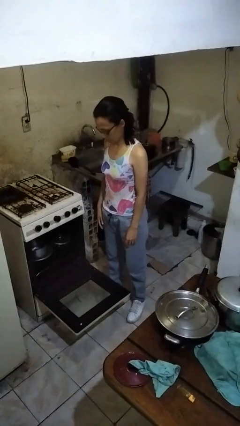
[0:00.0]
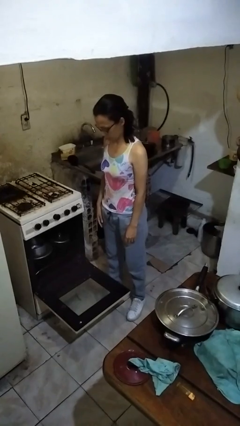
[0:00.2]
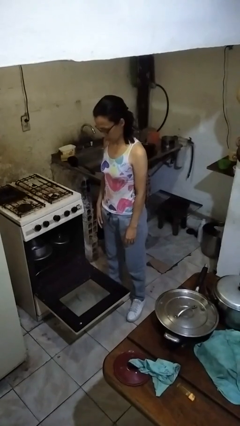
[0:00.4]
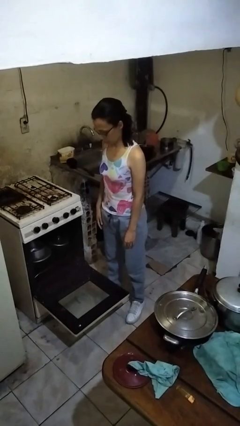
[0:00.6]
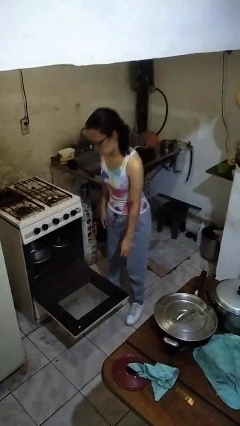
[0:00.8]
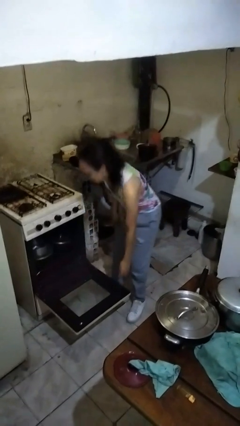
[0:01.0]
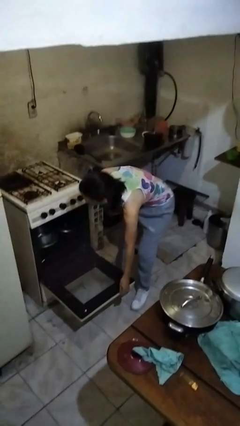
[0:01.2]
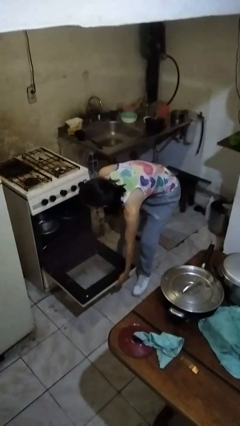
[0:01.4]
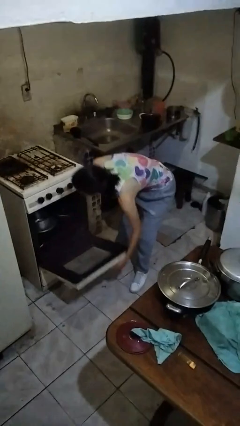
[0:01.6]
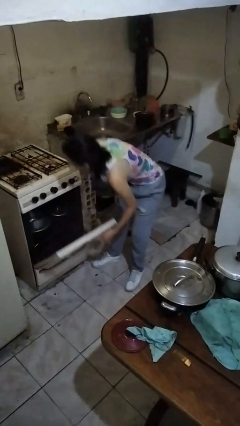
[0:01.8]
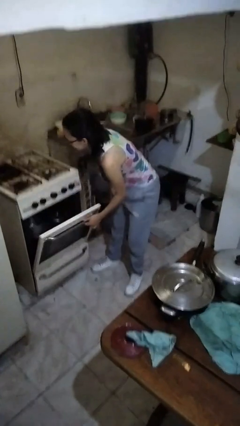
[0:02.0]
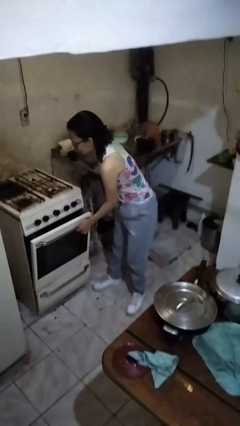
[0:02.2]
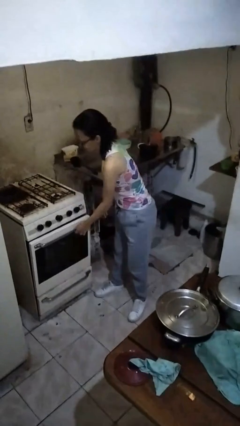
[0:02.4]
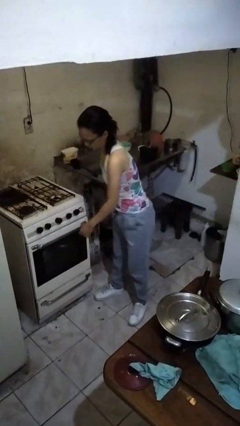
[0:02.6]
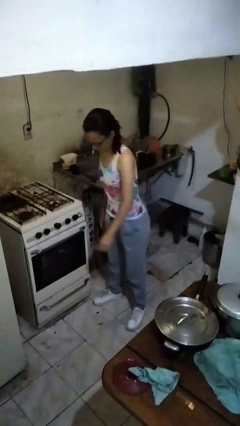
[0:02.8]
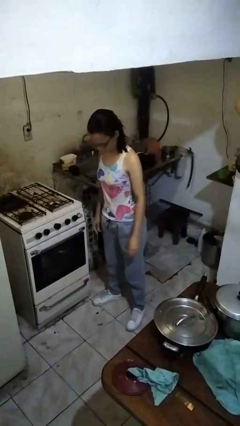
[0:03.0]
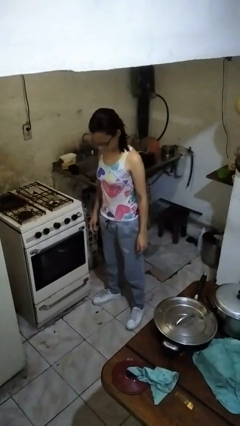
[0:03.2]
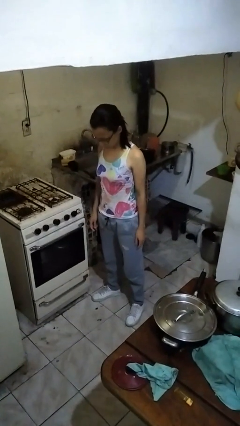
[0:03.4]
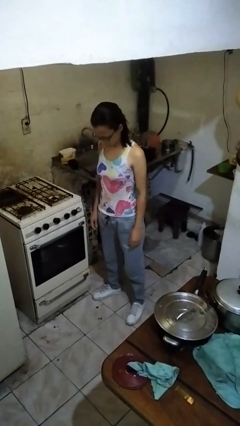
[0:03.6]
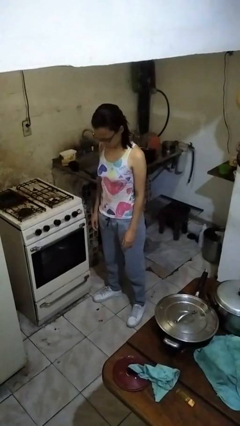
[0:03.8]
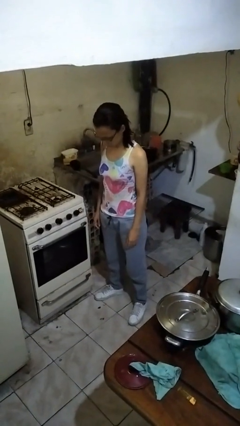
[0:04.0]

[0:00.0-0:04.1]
person closes oven door

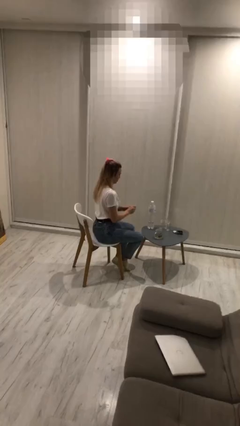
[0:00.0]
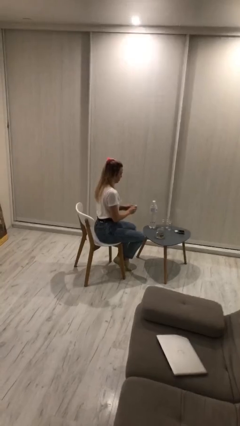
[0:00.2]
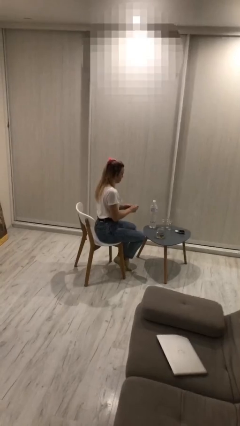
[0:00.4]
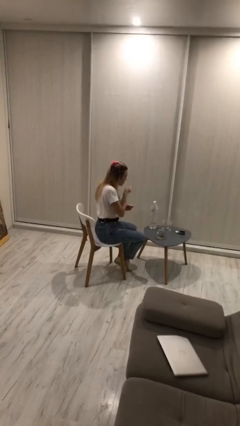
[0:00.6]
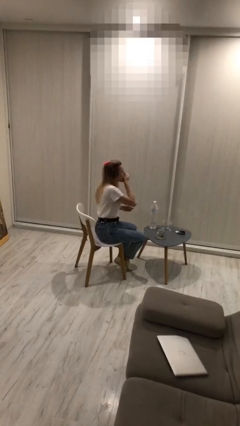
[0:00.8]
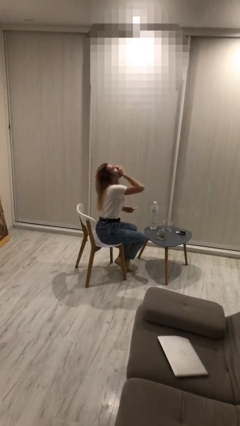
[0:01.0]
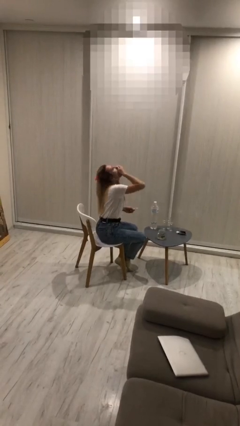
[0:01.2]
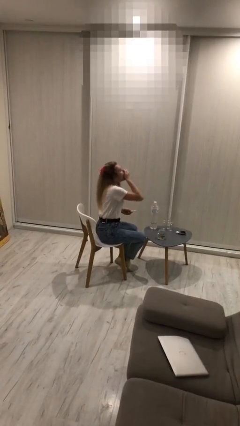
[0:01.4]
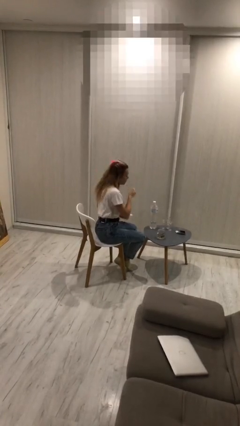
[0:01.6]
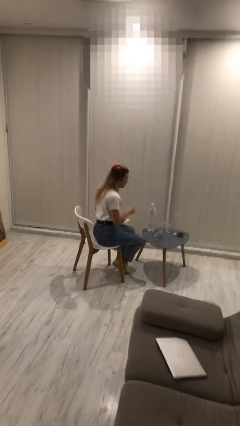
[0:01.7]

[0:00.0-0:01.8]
person takes medicine pills

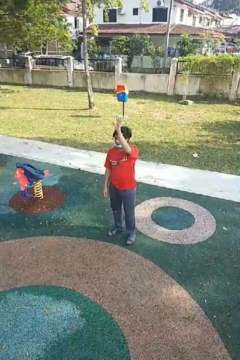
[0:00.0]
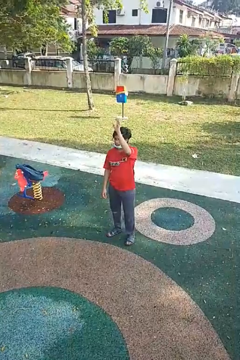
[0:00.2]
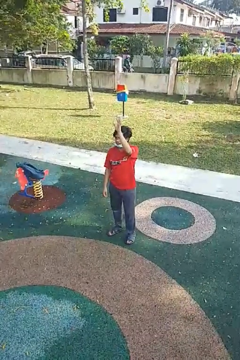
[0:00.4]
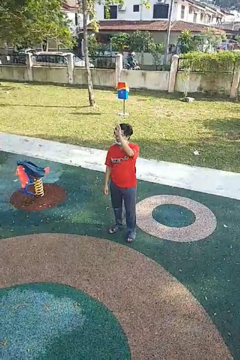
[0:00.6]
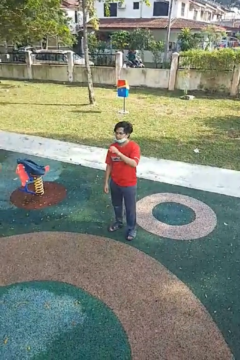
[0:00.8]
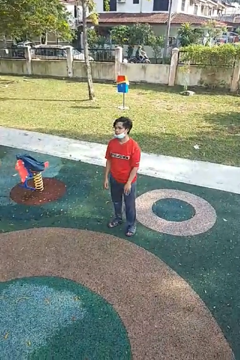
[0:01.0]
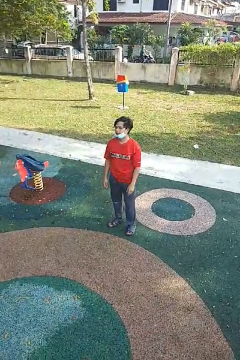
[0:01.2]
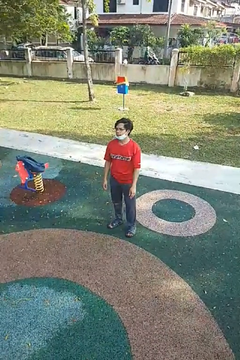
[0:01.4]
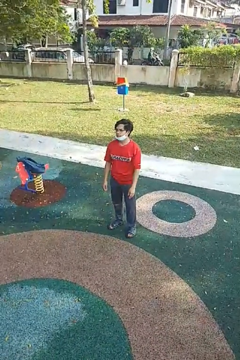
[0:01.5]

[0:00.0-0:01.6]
person gestures lower hand

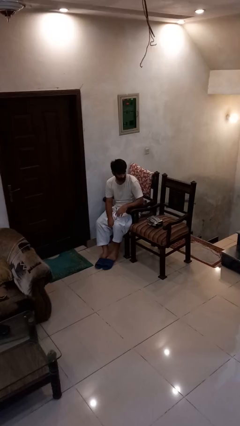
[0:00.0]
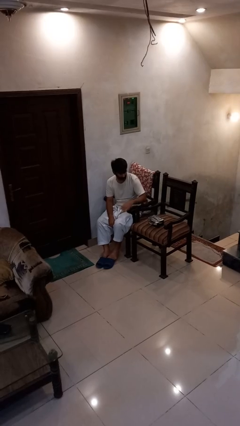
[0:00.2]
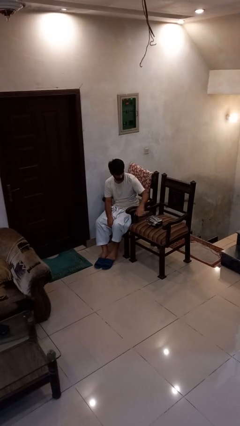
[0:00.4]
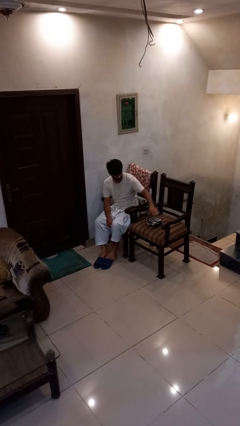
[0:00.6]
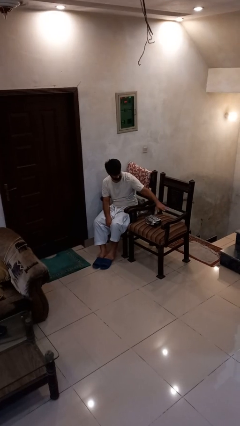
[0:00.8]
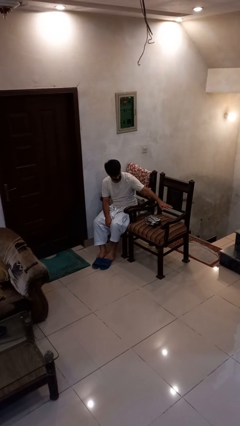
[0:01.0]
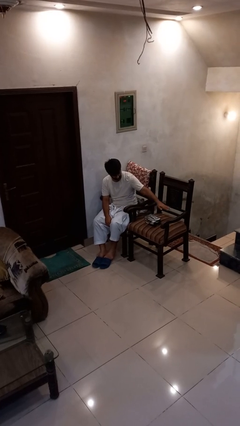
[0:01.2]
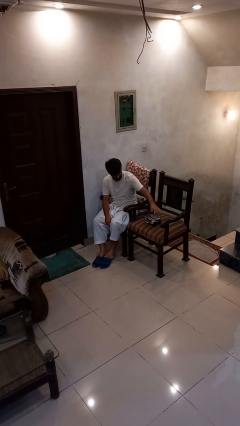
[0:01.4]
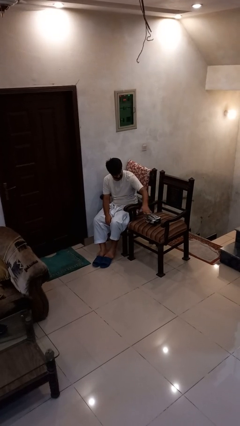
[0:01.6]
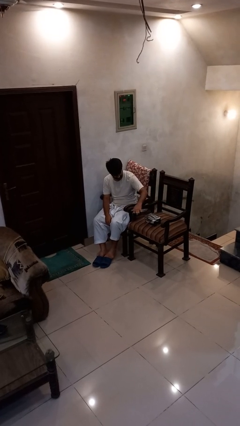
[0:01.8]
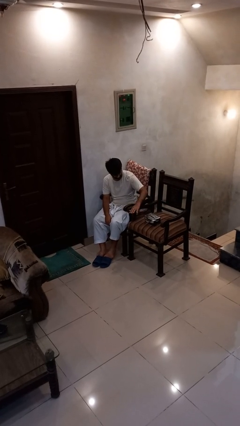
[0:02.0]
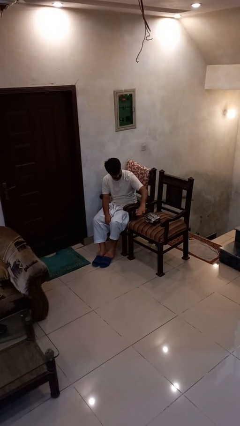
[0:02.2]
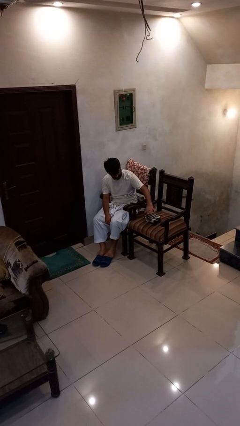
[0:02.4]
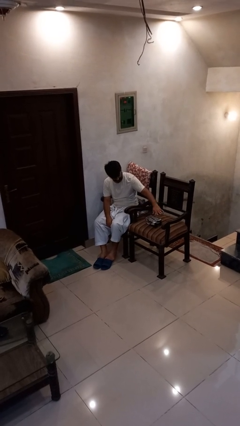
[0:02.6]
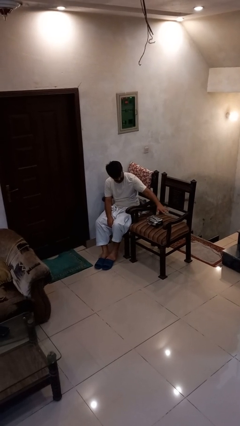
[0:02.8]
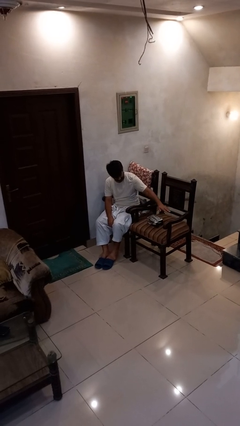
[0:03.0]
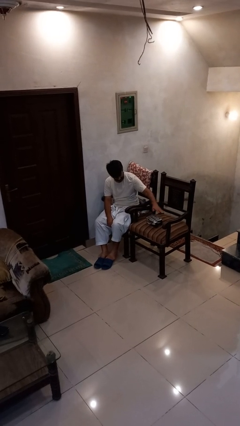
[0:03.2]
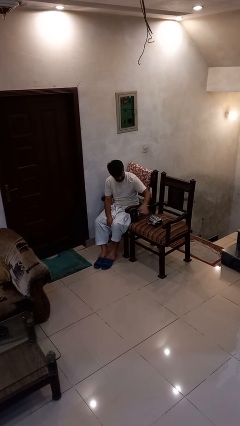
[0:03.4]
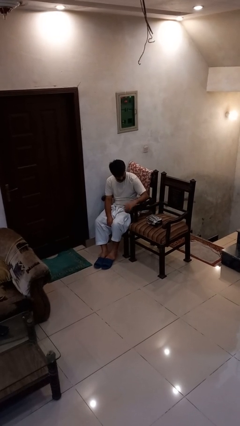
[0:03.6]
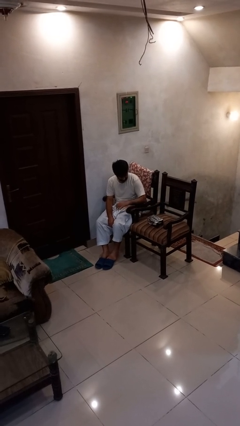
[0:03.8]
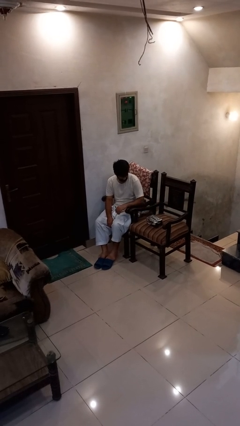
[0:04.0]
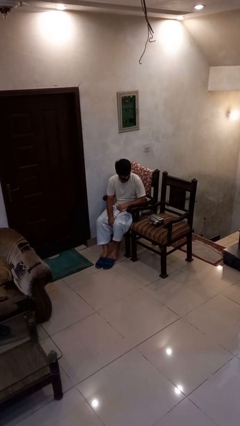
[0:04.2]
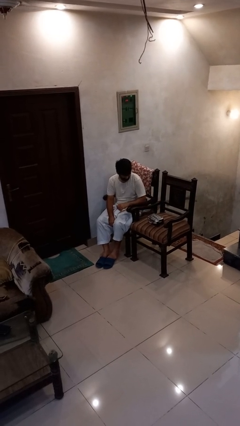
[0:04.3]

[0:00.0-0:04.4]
person waves hand over object

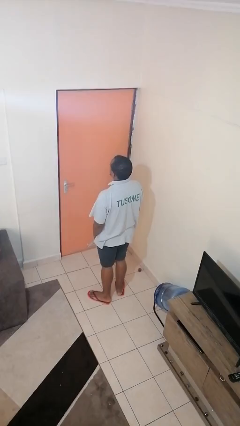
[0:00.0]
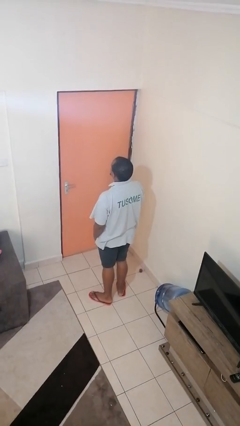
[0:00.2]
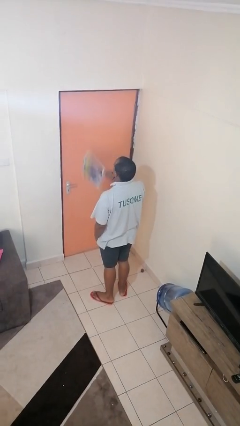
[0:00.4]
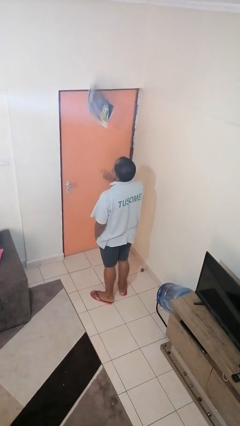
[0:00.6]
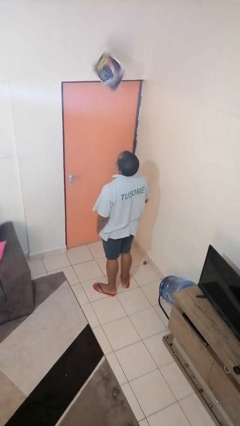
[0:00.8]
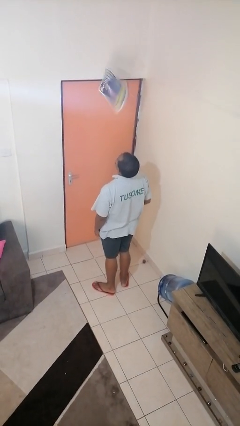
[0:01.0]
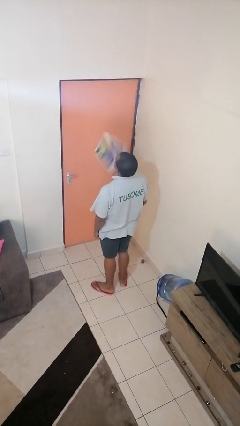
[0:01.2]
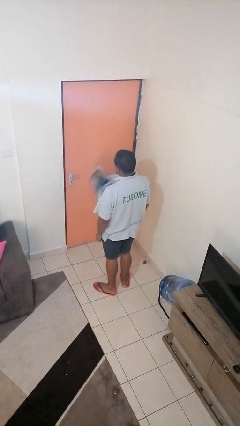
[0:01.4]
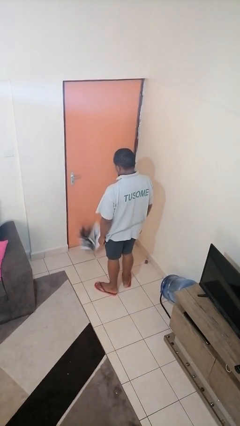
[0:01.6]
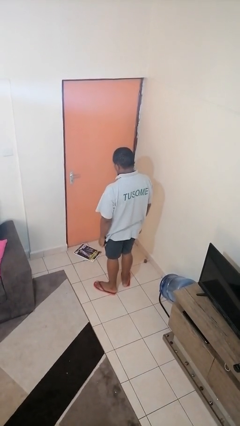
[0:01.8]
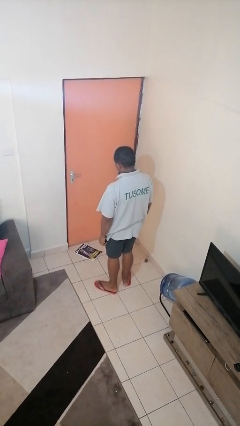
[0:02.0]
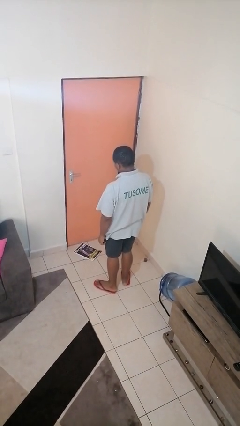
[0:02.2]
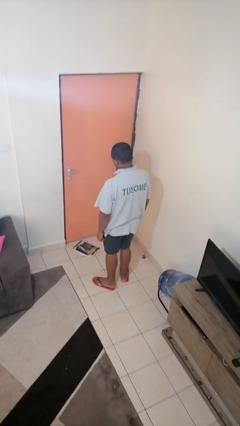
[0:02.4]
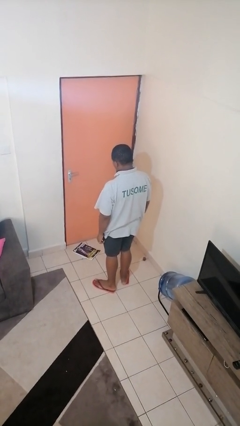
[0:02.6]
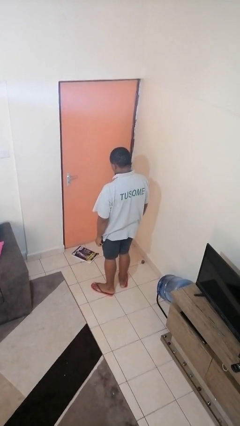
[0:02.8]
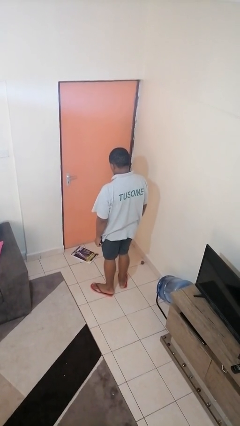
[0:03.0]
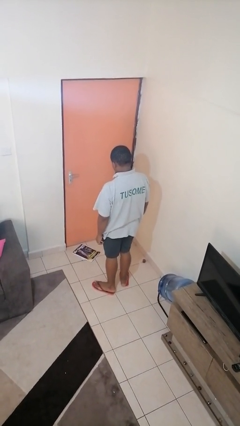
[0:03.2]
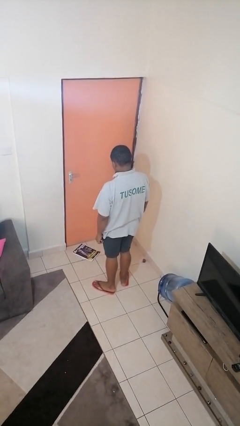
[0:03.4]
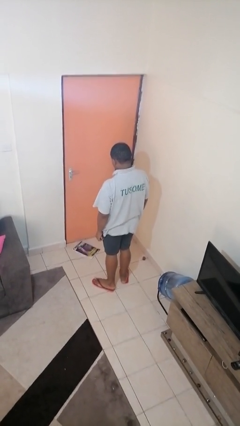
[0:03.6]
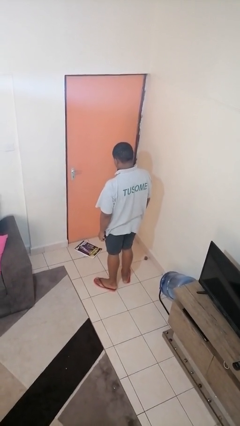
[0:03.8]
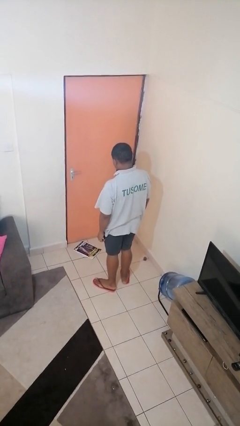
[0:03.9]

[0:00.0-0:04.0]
person throws object into air

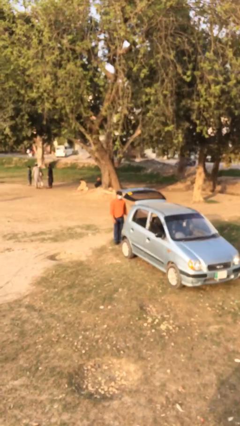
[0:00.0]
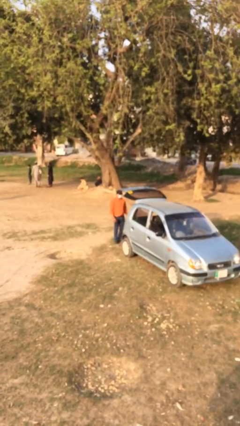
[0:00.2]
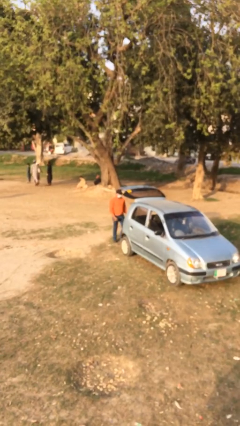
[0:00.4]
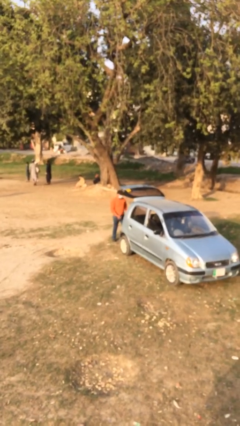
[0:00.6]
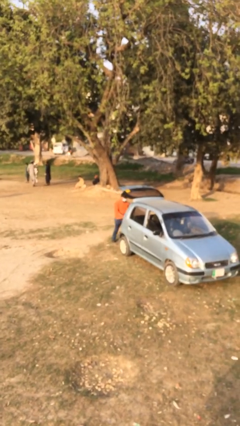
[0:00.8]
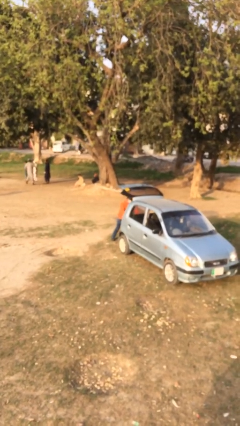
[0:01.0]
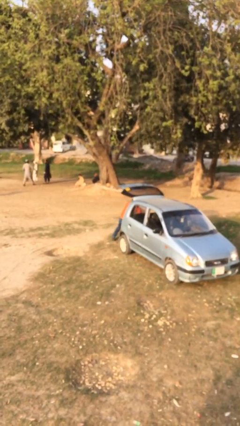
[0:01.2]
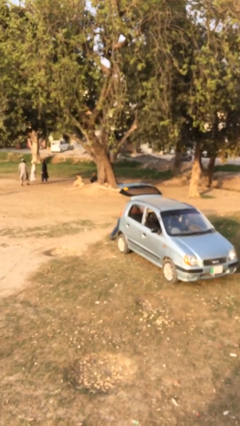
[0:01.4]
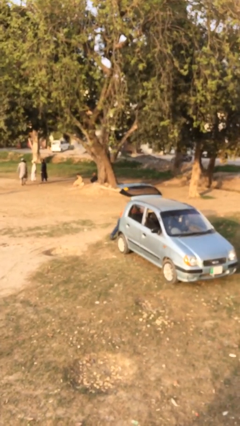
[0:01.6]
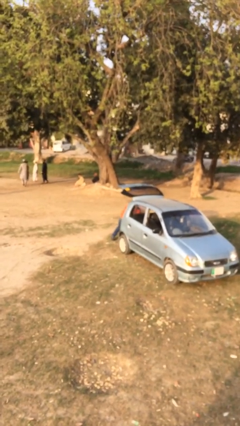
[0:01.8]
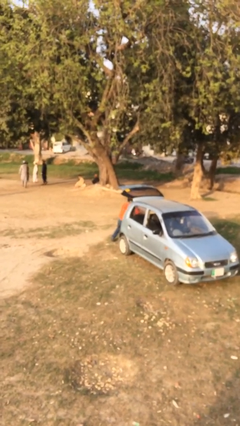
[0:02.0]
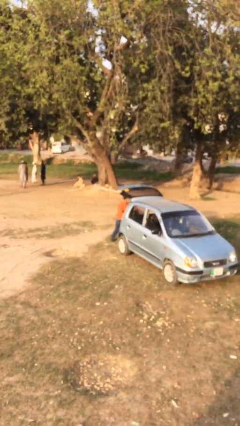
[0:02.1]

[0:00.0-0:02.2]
person unloads car

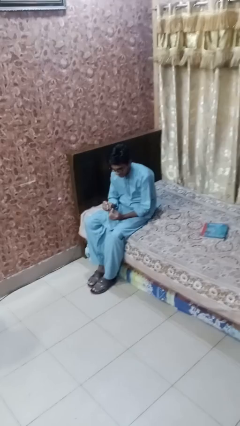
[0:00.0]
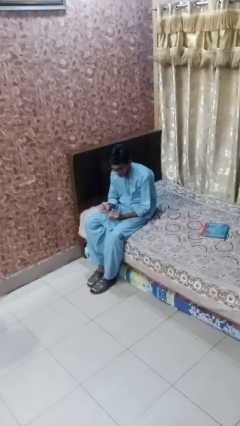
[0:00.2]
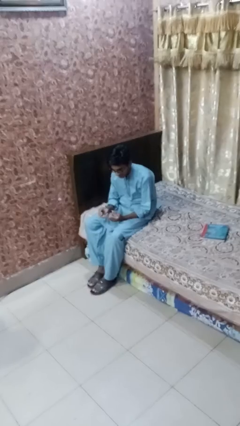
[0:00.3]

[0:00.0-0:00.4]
person clips fingernails
